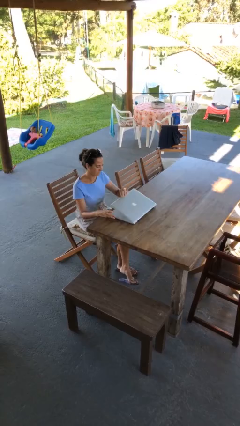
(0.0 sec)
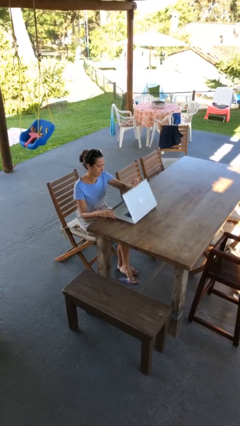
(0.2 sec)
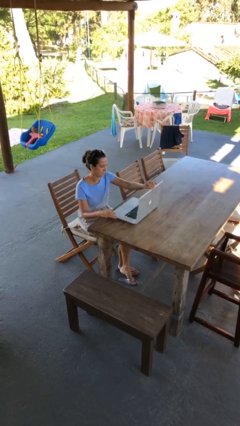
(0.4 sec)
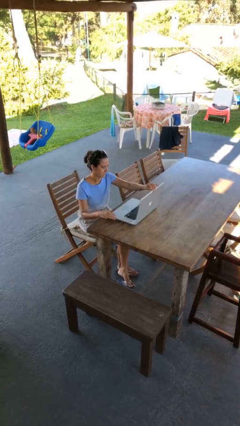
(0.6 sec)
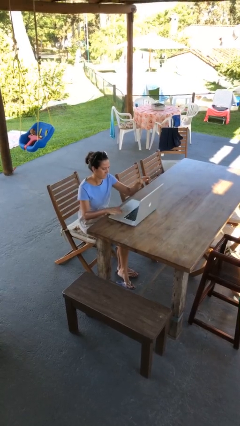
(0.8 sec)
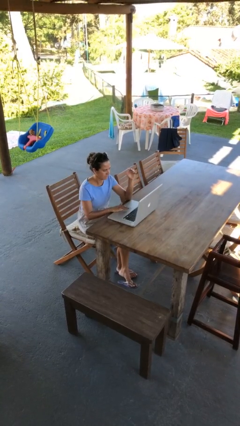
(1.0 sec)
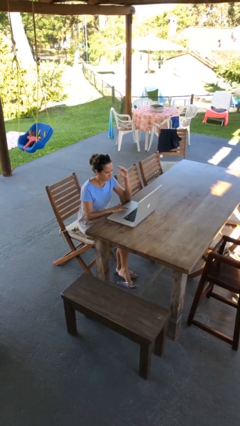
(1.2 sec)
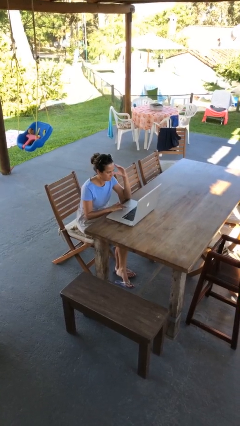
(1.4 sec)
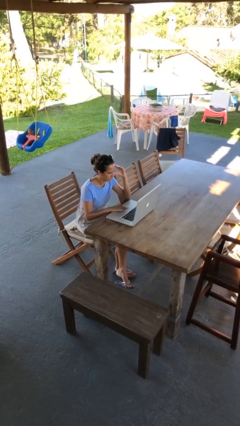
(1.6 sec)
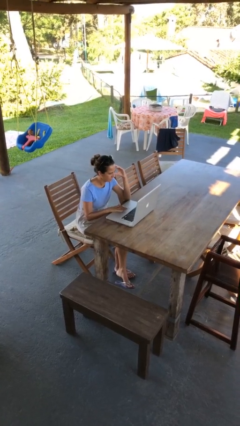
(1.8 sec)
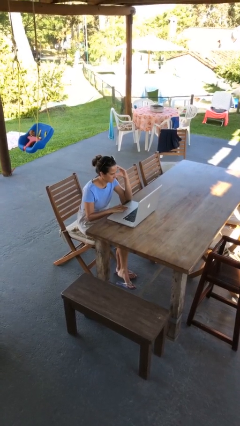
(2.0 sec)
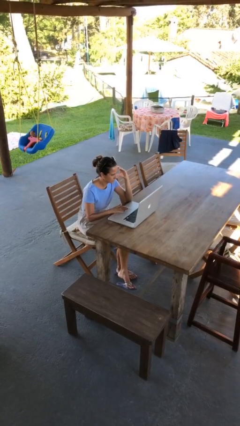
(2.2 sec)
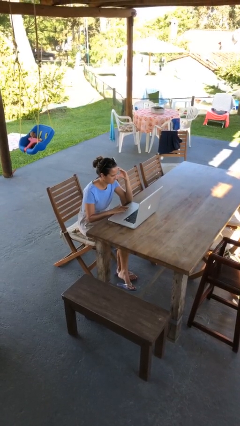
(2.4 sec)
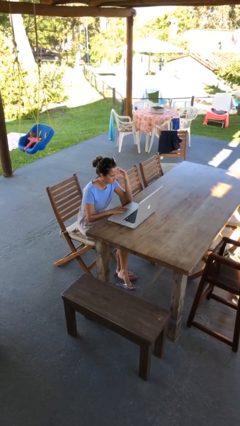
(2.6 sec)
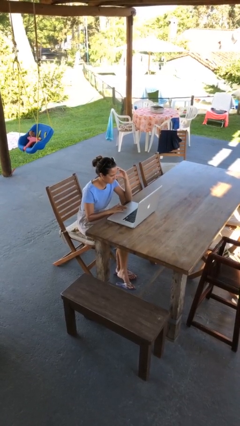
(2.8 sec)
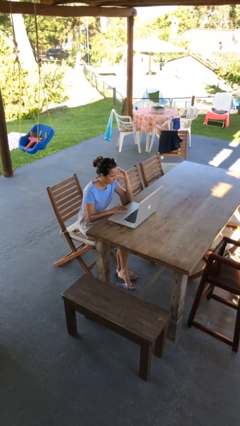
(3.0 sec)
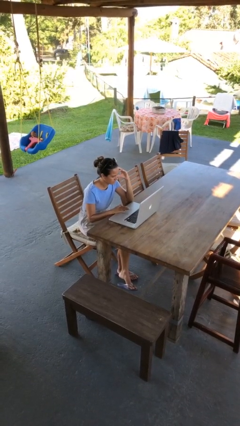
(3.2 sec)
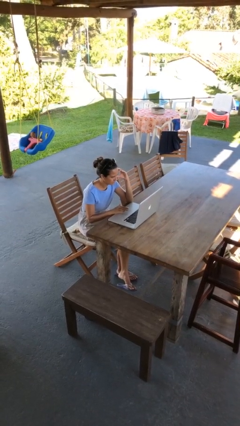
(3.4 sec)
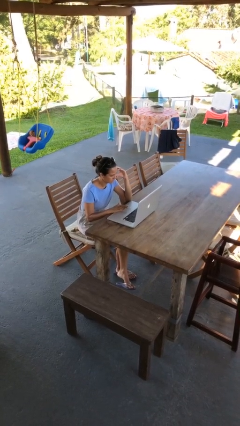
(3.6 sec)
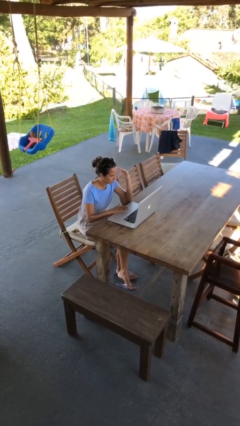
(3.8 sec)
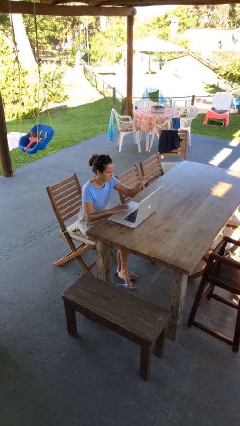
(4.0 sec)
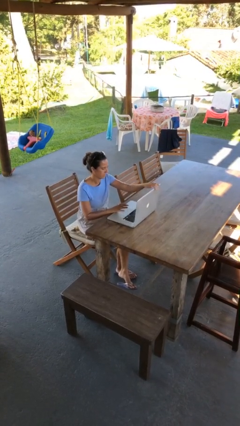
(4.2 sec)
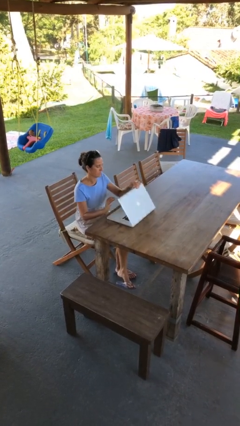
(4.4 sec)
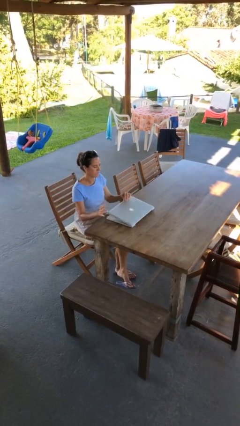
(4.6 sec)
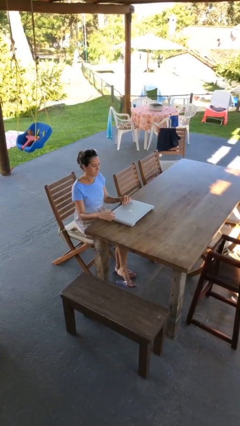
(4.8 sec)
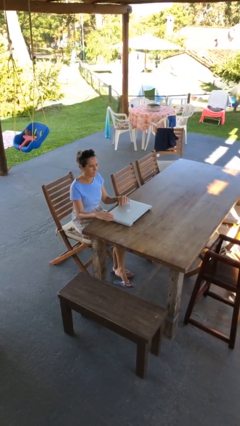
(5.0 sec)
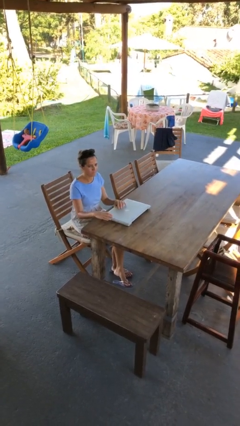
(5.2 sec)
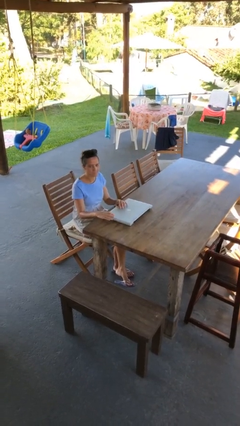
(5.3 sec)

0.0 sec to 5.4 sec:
person interacts with laptop

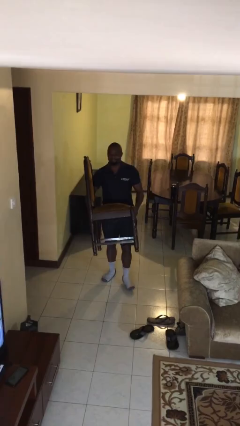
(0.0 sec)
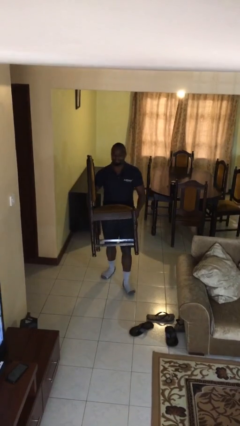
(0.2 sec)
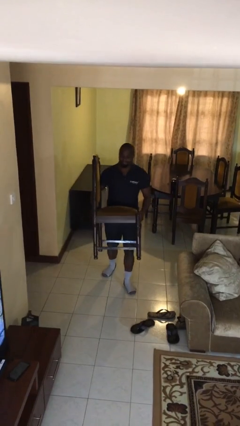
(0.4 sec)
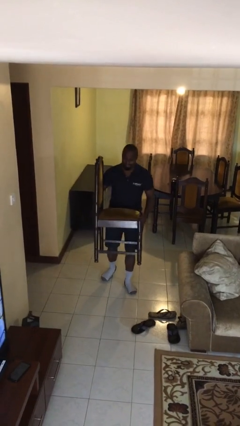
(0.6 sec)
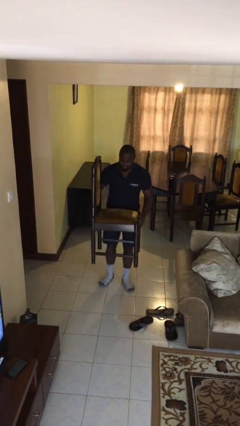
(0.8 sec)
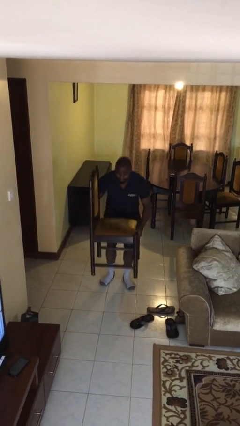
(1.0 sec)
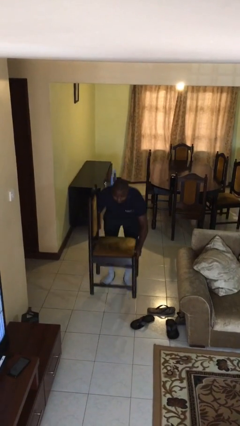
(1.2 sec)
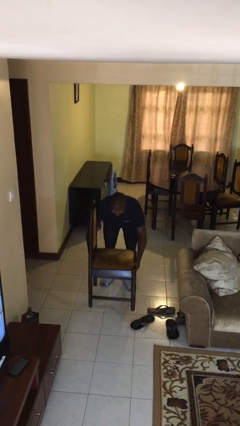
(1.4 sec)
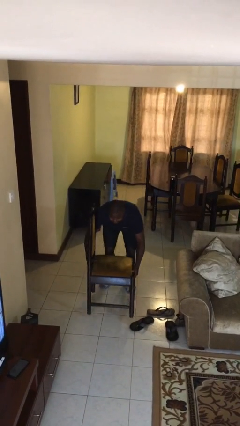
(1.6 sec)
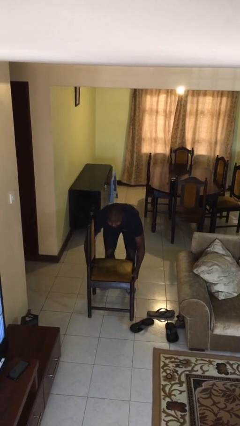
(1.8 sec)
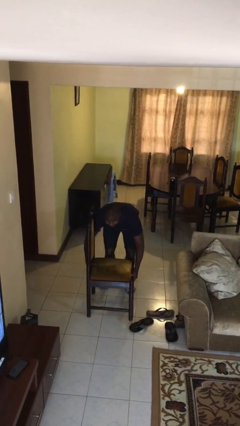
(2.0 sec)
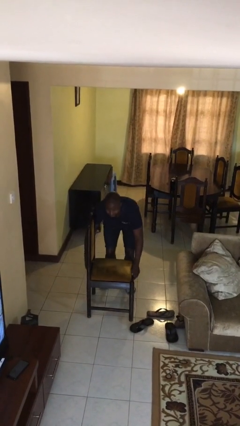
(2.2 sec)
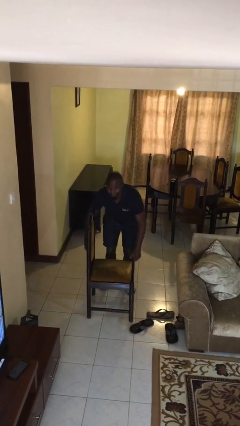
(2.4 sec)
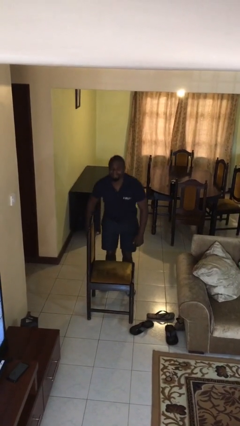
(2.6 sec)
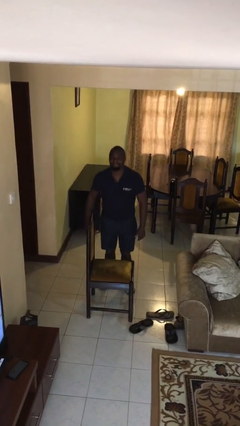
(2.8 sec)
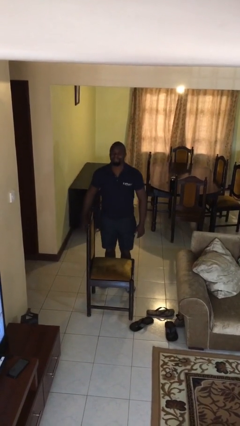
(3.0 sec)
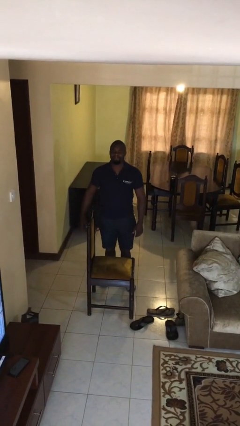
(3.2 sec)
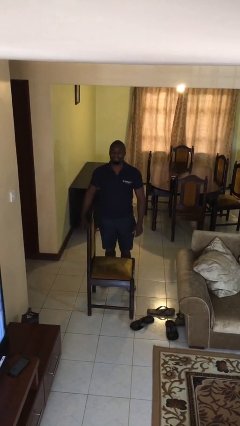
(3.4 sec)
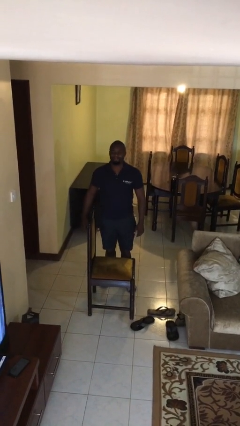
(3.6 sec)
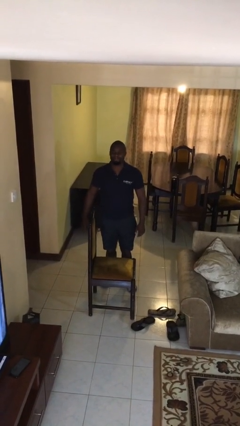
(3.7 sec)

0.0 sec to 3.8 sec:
person puts down object on floor

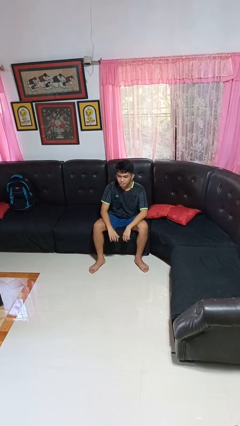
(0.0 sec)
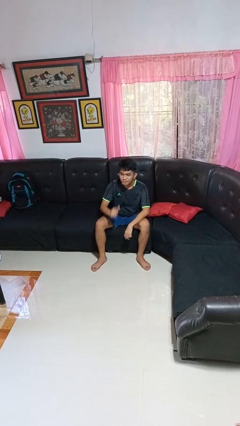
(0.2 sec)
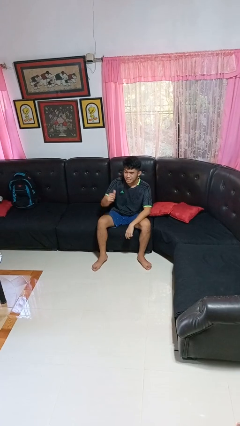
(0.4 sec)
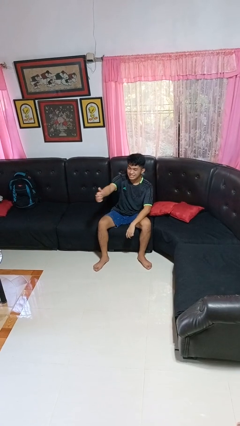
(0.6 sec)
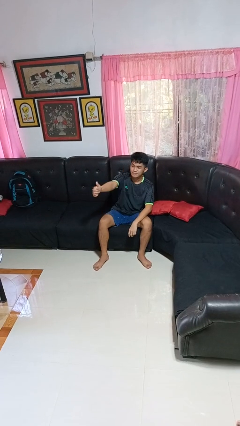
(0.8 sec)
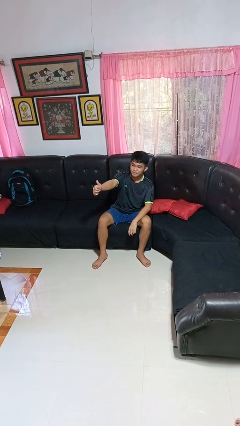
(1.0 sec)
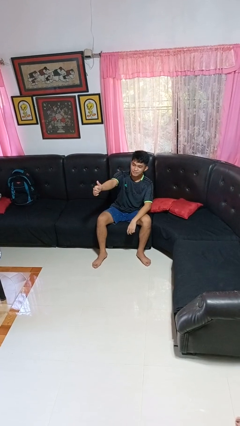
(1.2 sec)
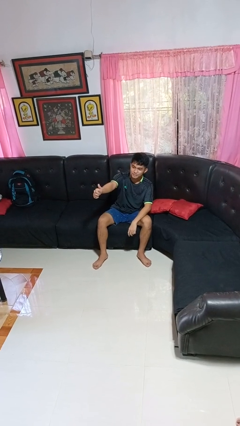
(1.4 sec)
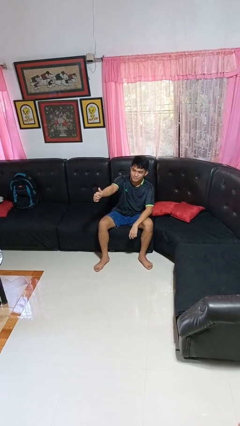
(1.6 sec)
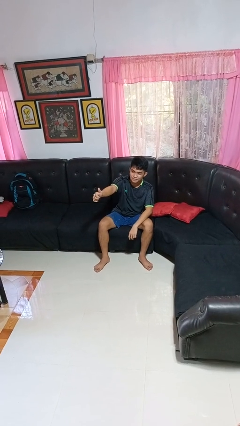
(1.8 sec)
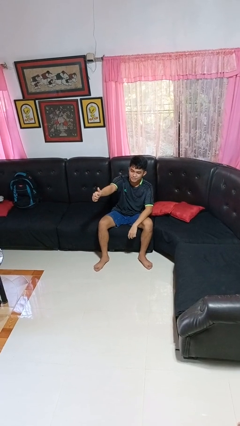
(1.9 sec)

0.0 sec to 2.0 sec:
person gestures thumbs up

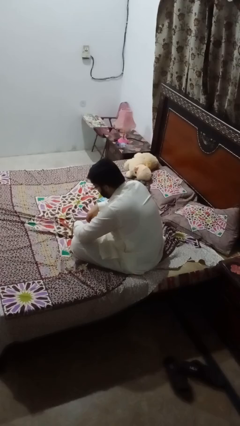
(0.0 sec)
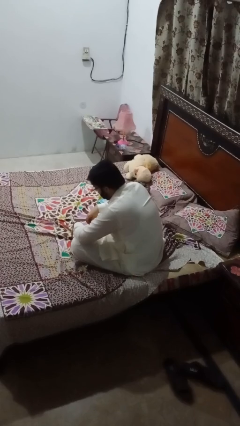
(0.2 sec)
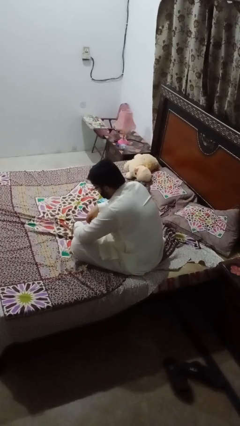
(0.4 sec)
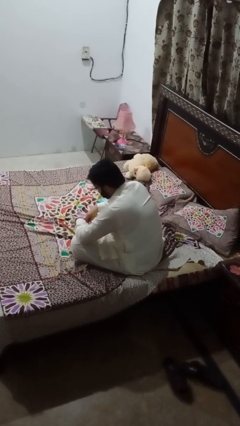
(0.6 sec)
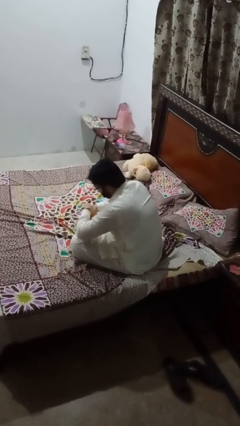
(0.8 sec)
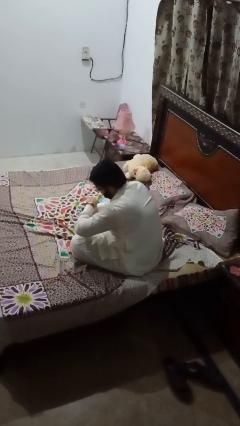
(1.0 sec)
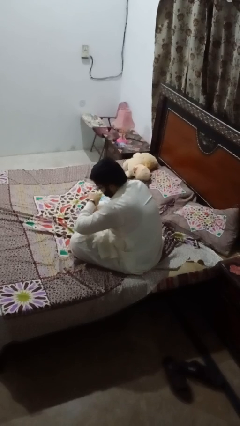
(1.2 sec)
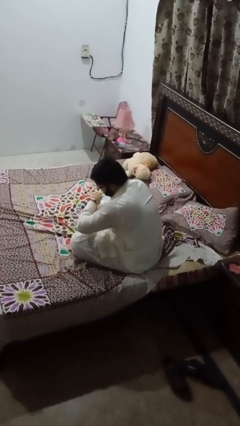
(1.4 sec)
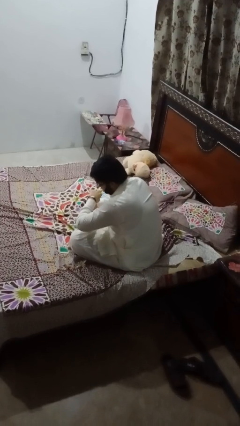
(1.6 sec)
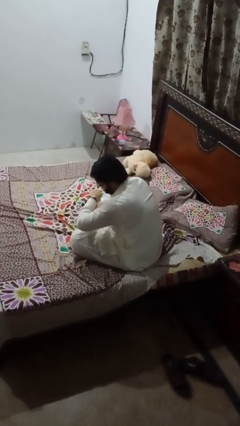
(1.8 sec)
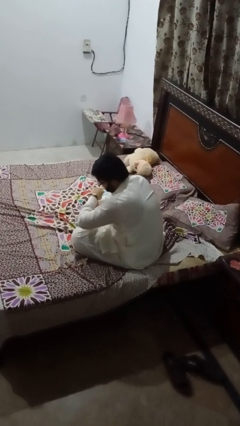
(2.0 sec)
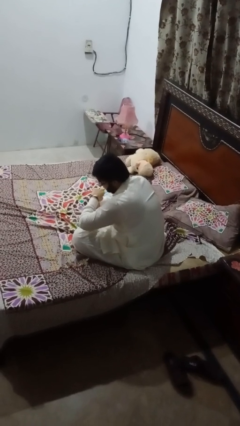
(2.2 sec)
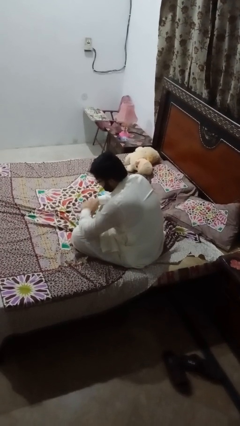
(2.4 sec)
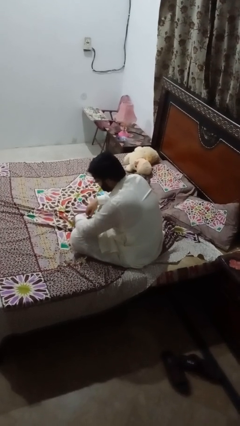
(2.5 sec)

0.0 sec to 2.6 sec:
person looks at wristwatch

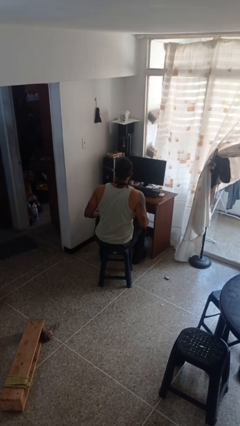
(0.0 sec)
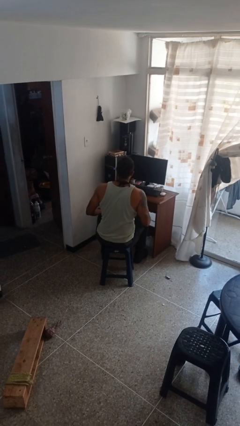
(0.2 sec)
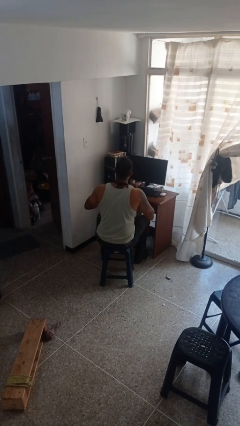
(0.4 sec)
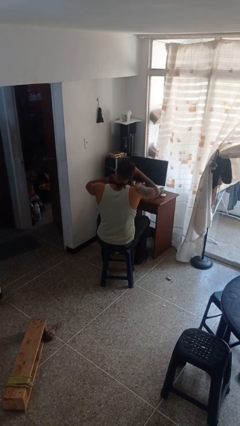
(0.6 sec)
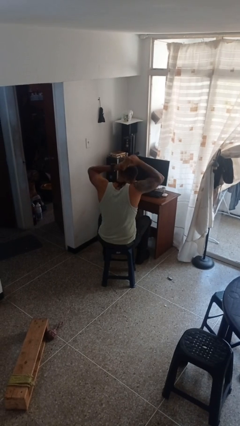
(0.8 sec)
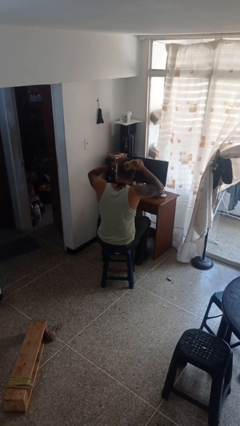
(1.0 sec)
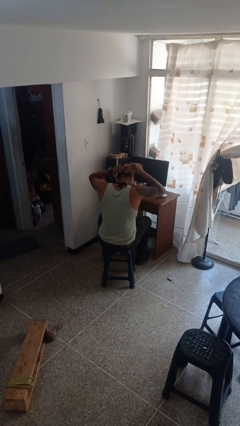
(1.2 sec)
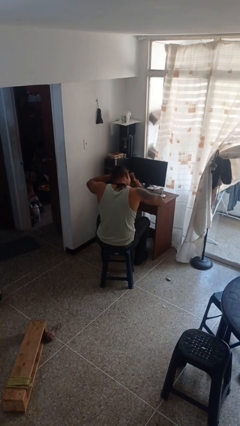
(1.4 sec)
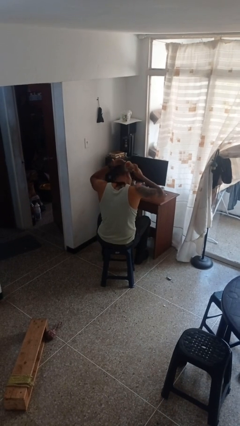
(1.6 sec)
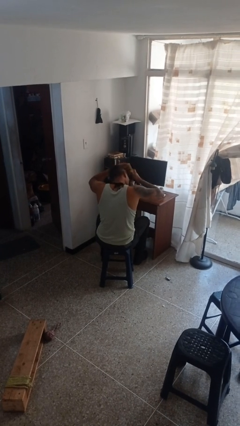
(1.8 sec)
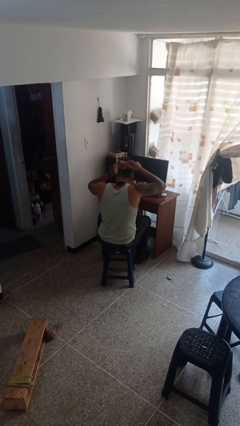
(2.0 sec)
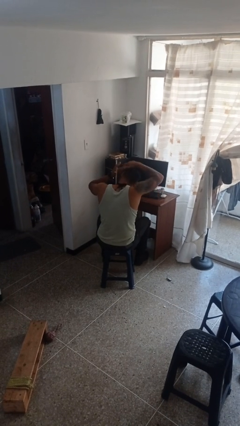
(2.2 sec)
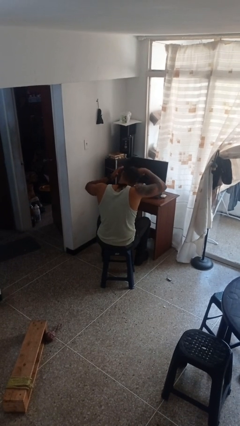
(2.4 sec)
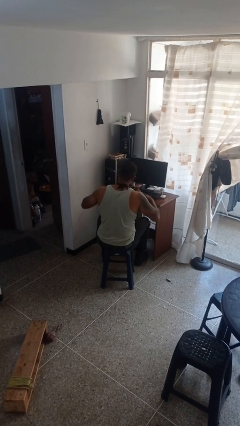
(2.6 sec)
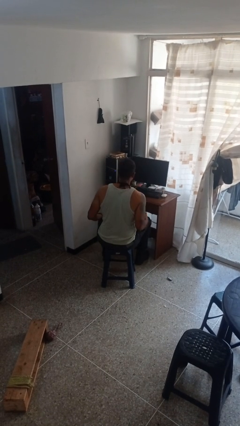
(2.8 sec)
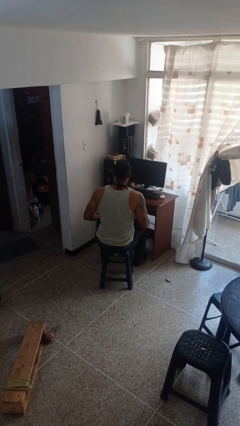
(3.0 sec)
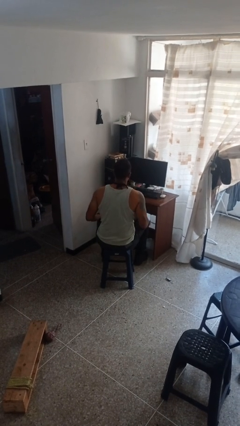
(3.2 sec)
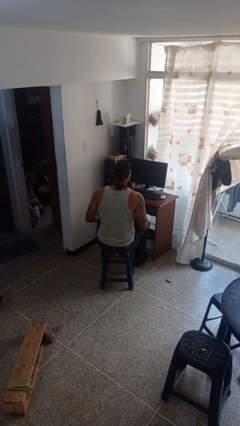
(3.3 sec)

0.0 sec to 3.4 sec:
person brushes hair

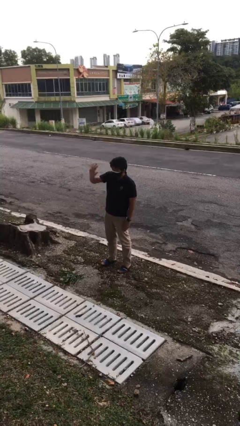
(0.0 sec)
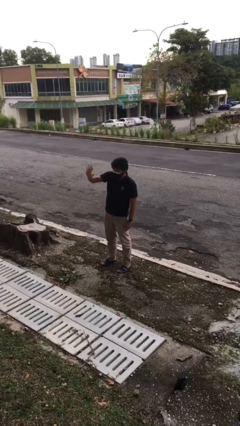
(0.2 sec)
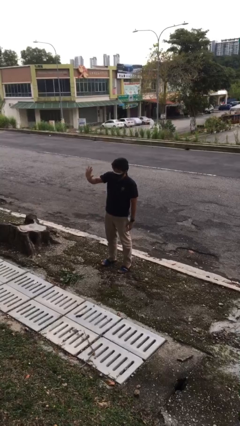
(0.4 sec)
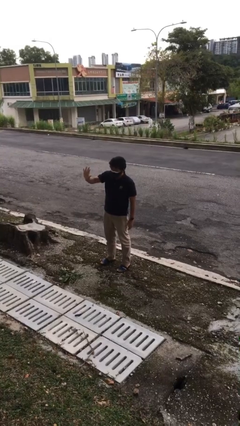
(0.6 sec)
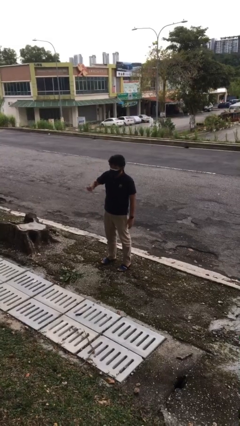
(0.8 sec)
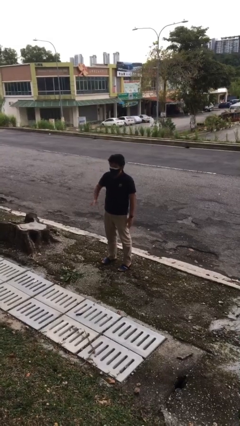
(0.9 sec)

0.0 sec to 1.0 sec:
person gestures number five
